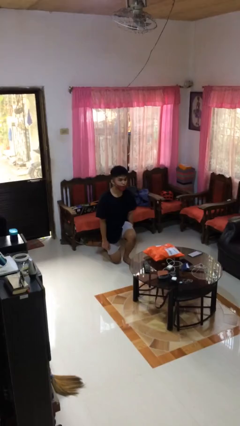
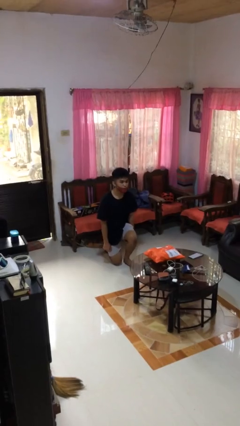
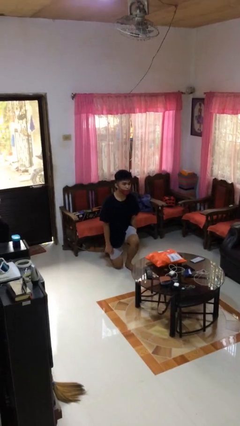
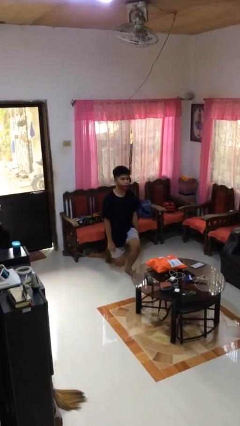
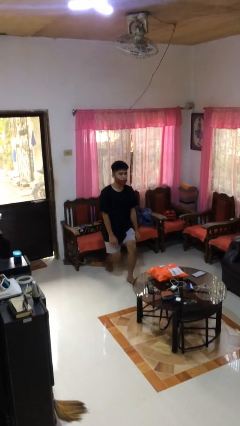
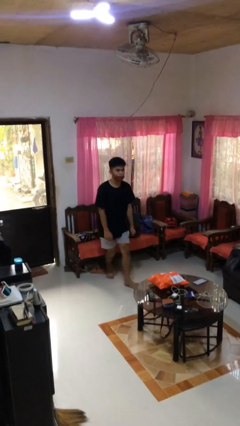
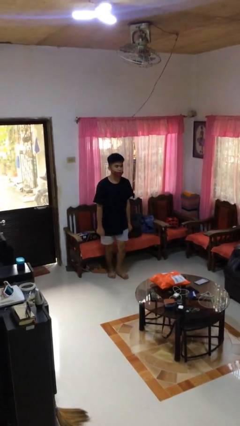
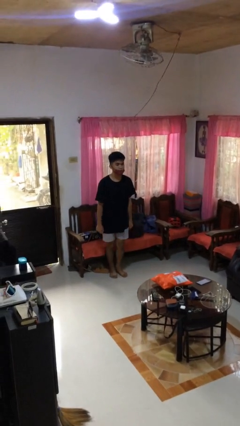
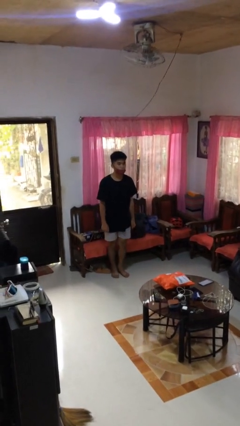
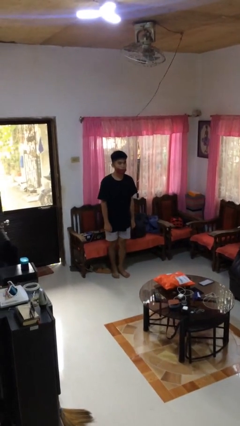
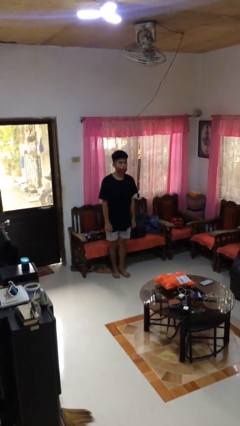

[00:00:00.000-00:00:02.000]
person stands up from floor

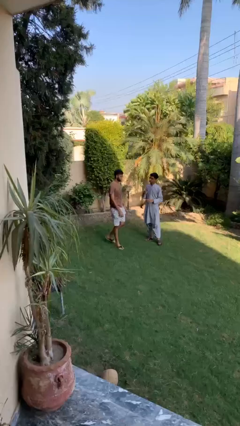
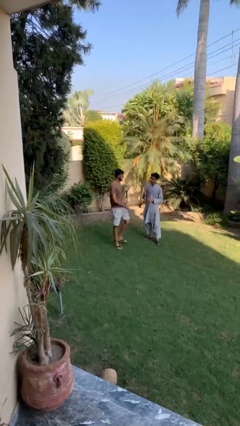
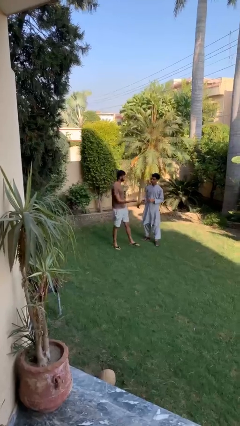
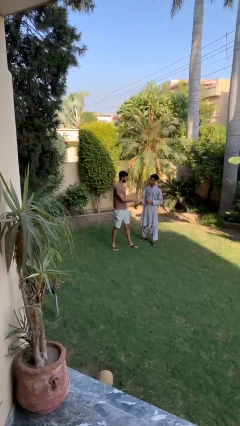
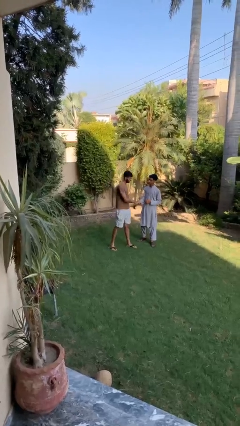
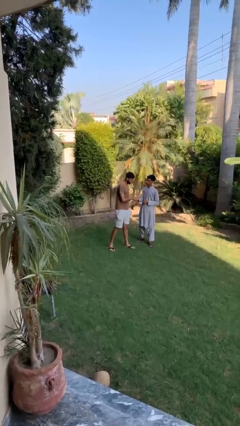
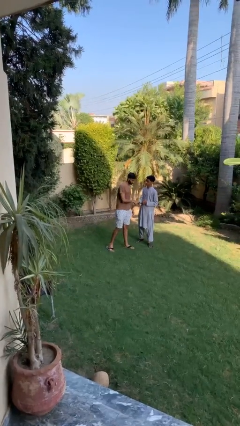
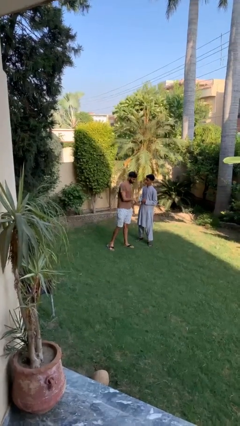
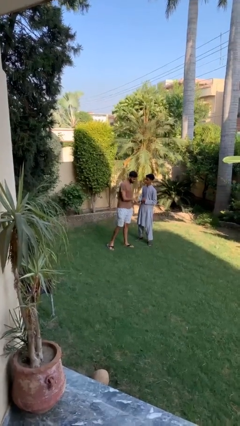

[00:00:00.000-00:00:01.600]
person shakes hand

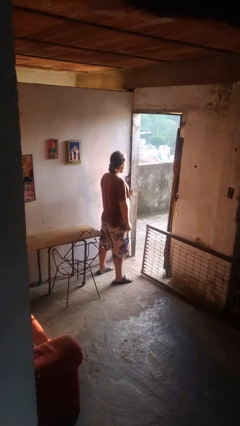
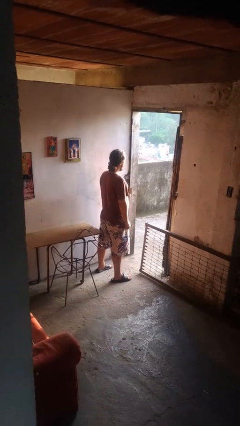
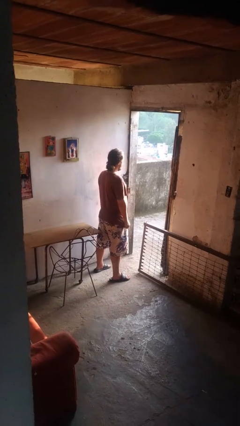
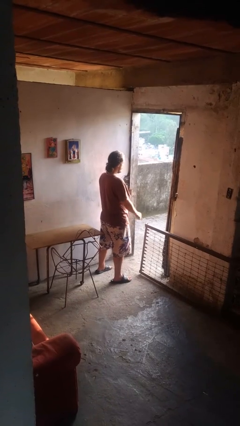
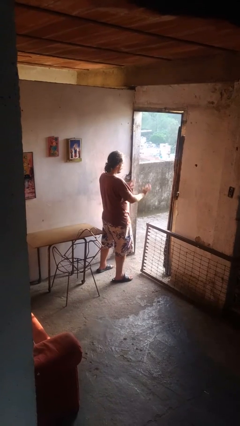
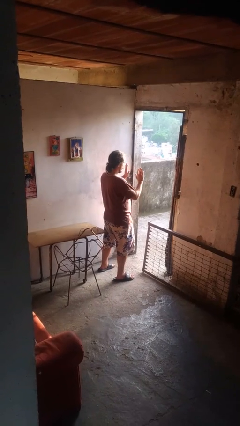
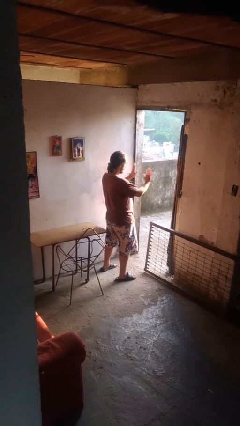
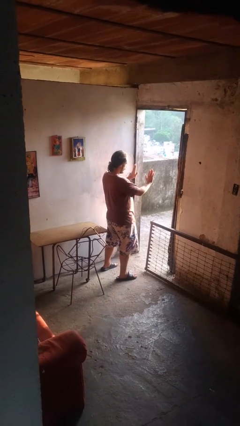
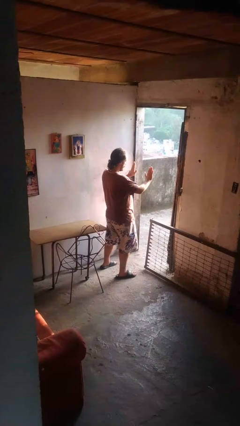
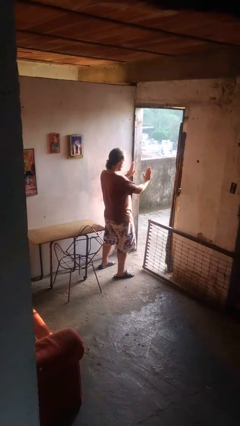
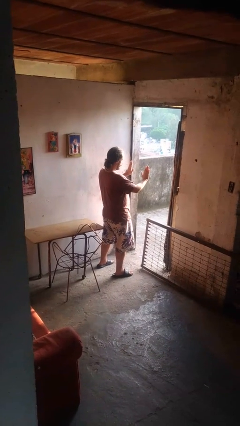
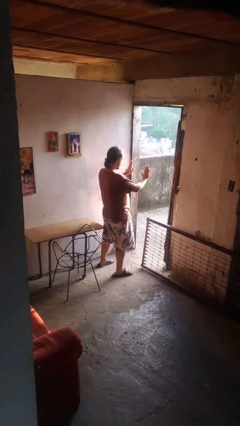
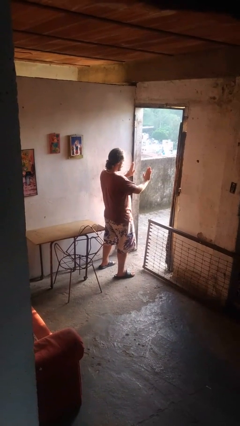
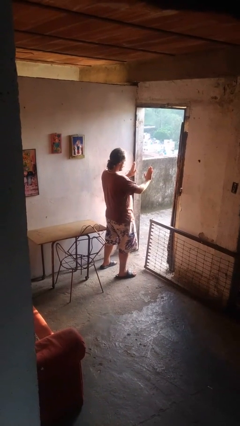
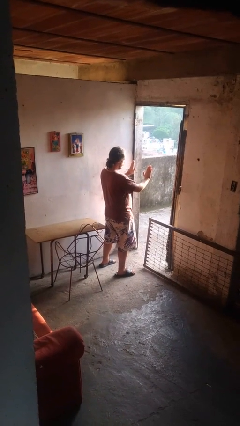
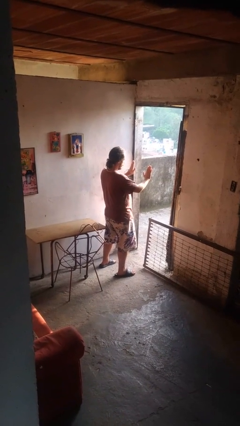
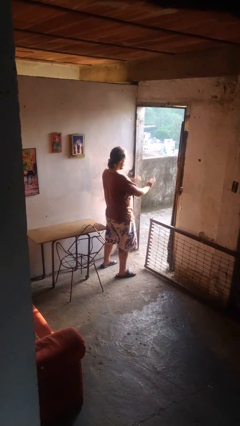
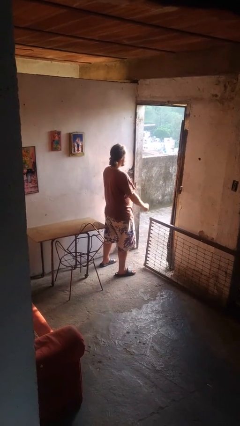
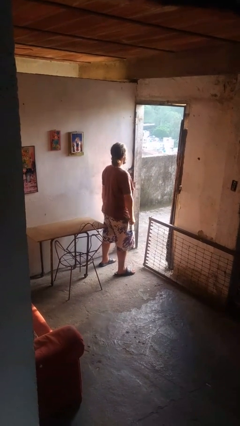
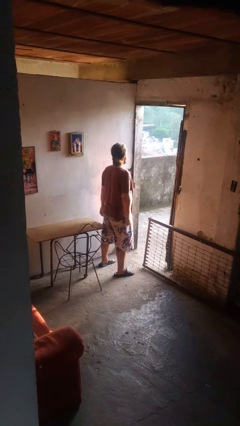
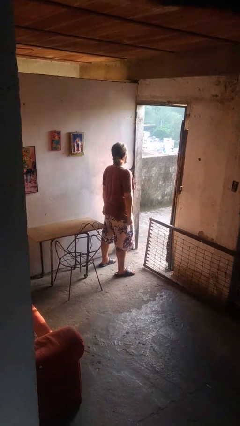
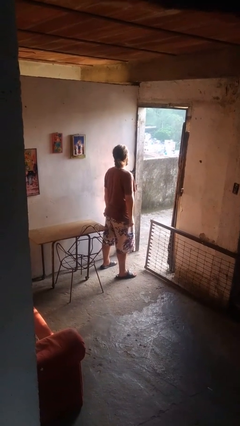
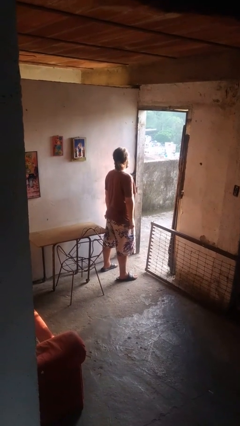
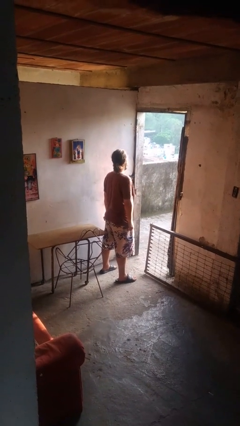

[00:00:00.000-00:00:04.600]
person gestures stop

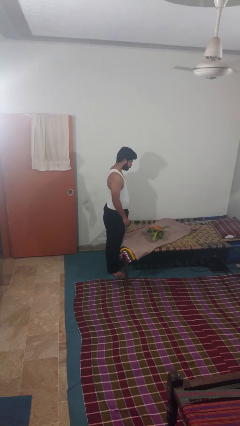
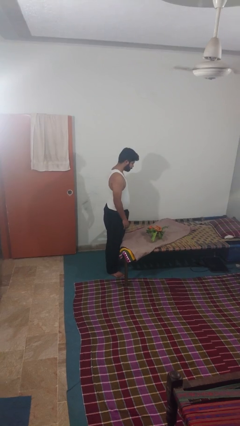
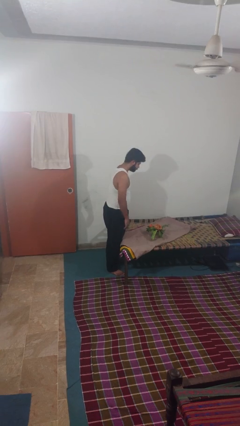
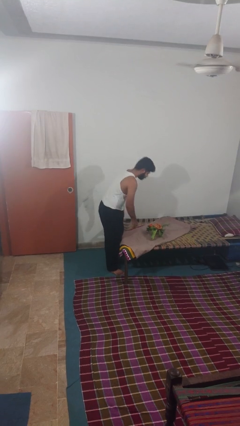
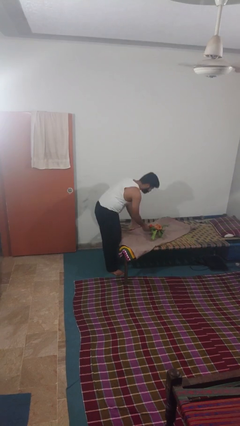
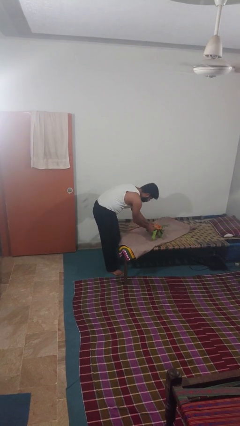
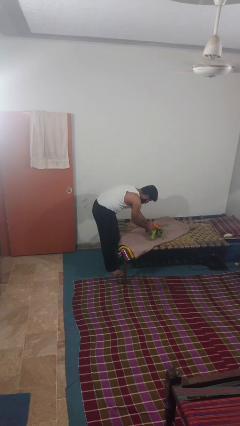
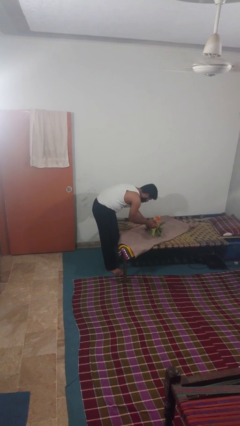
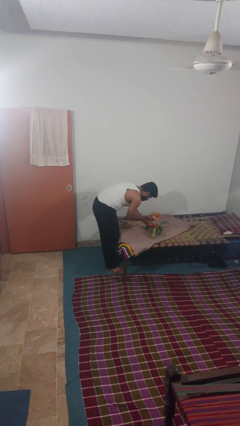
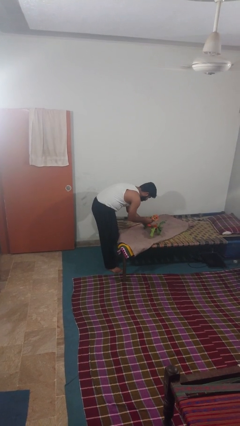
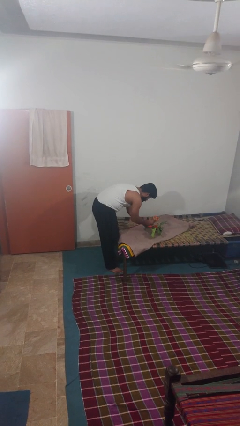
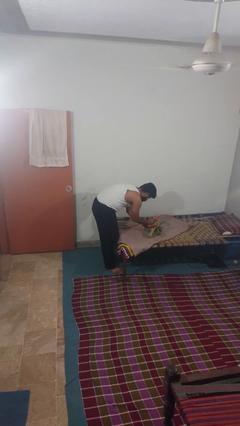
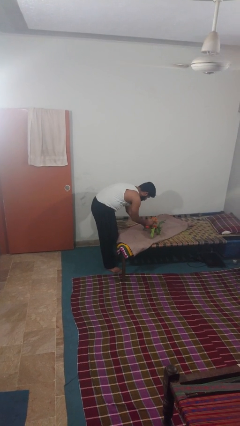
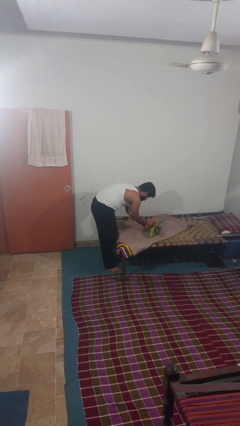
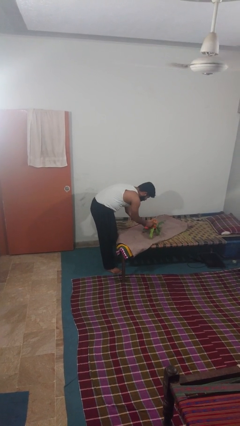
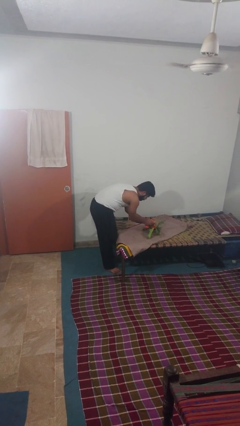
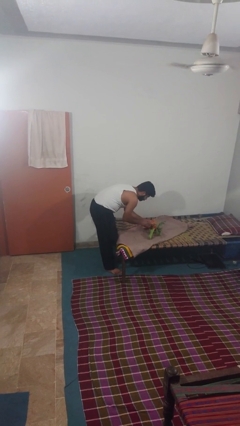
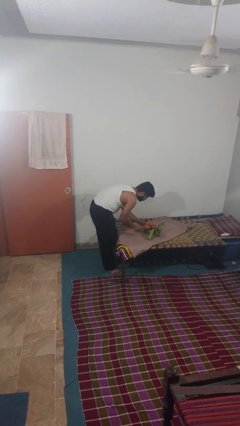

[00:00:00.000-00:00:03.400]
person arranges flowers in vase

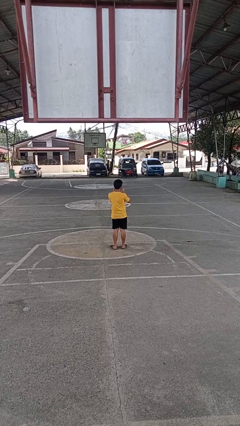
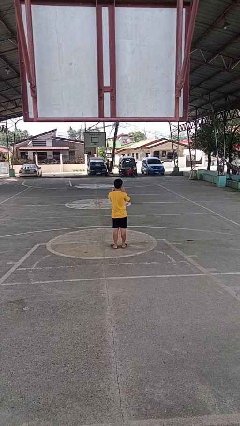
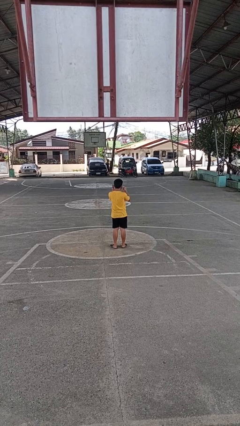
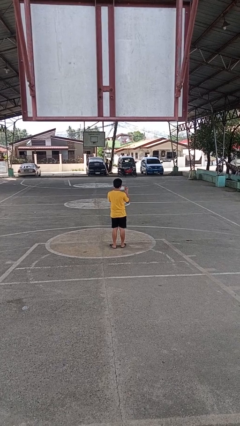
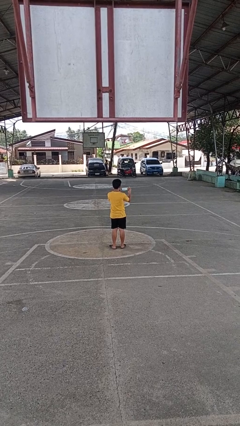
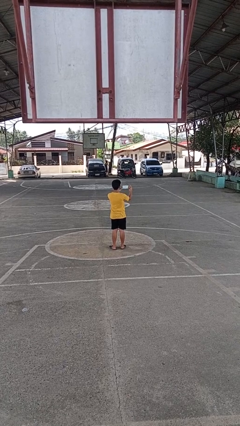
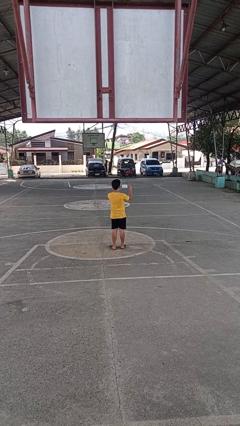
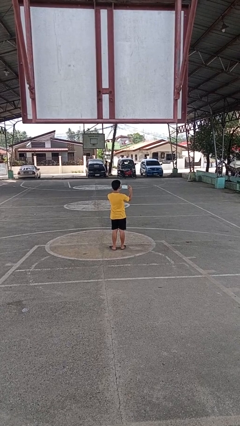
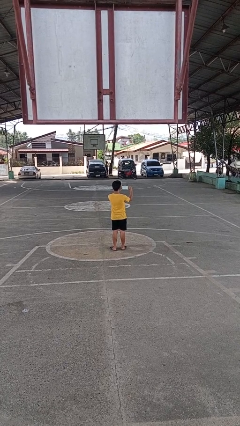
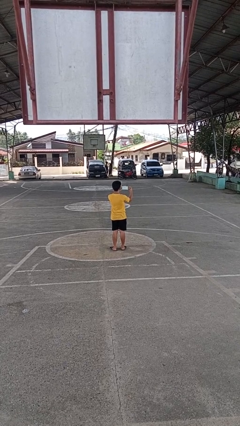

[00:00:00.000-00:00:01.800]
person takes off facemask

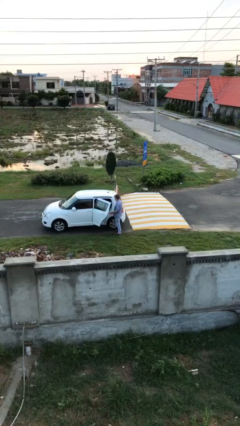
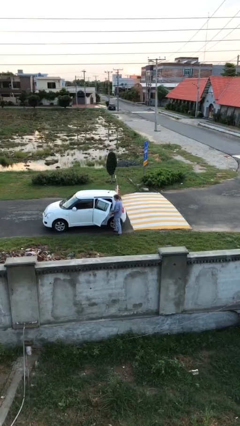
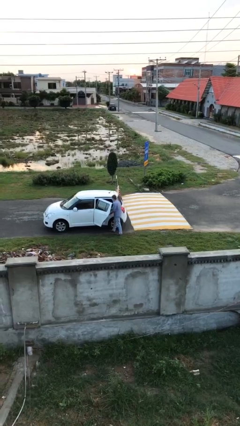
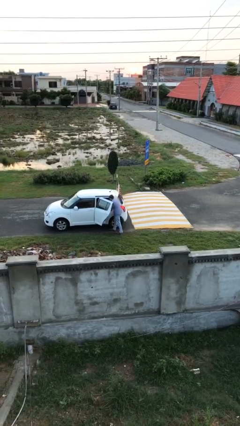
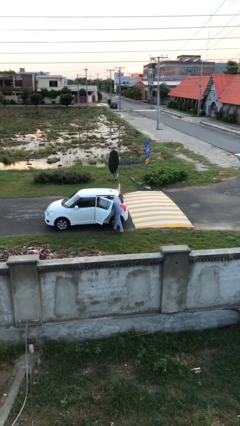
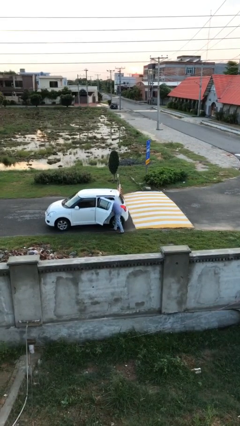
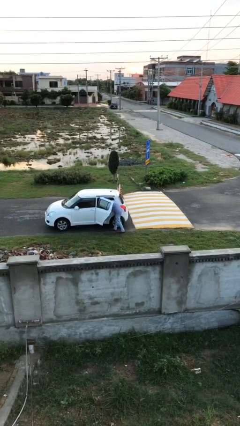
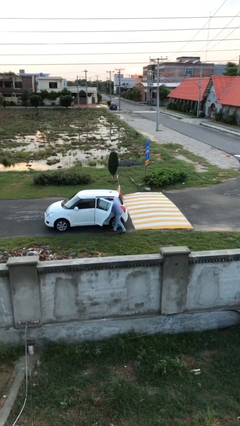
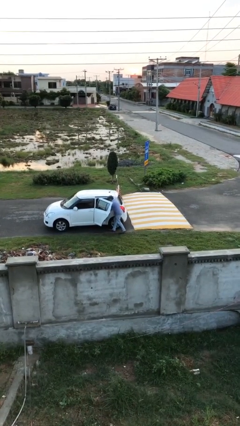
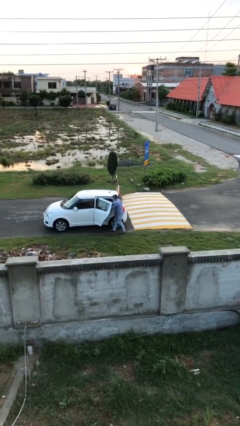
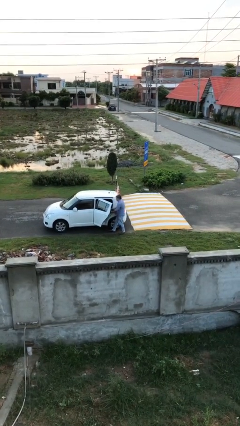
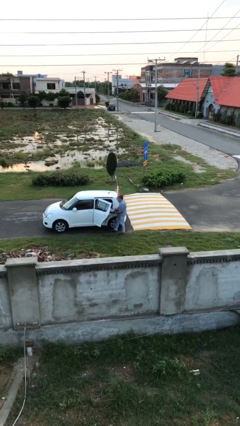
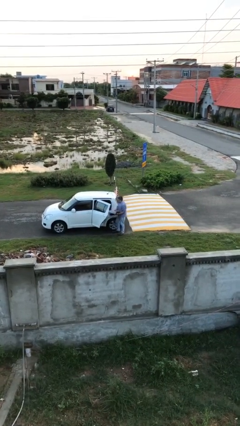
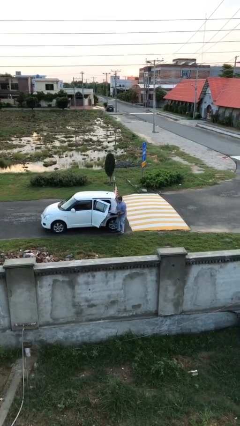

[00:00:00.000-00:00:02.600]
person unloads car

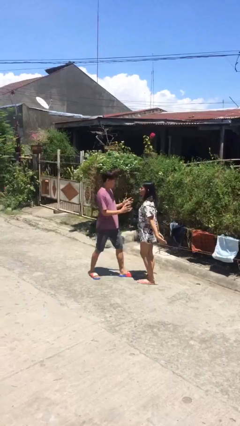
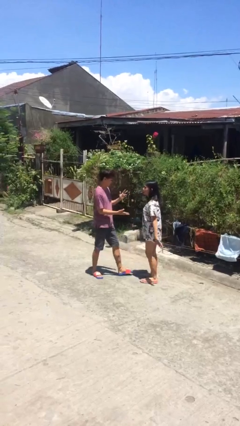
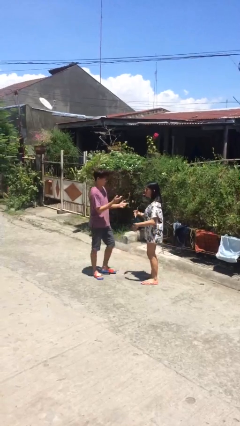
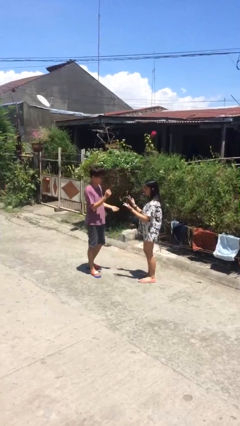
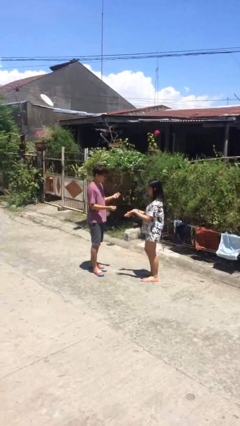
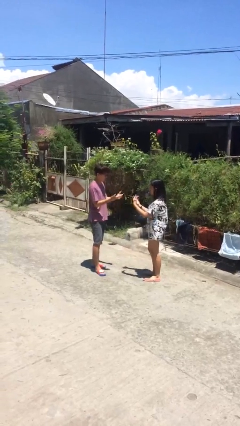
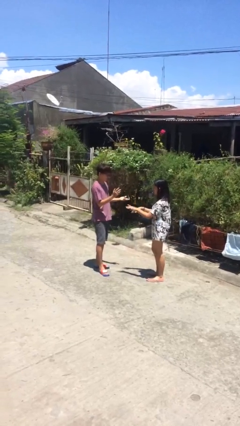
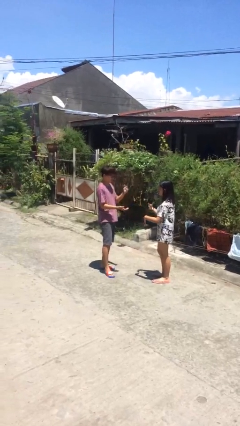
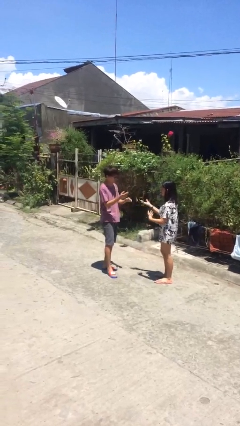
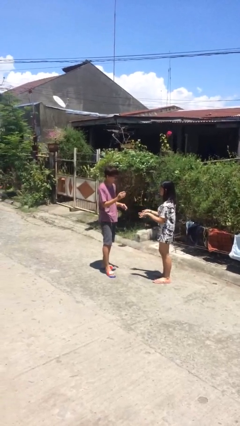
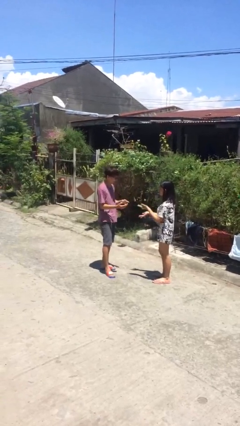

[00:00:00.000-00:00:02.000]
person talks to person
